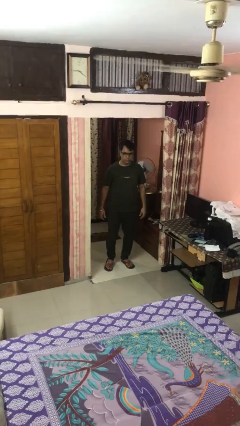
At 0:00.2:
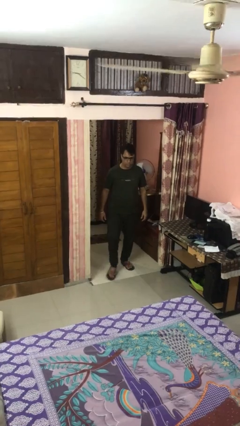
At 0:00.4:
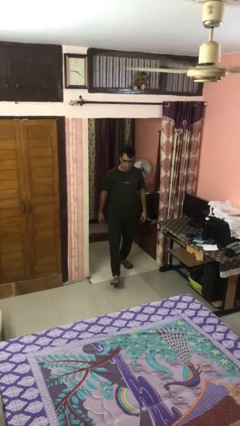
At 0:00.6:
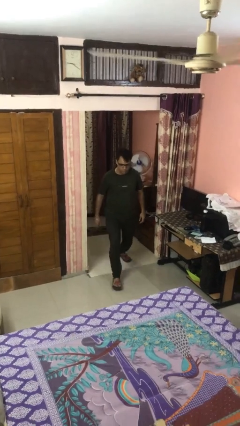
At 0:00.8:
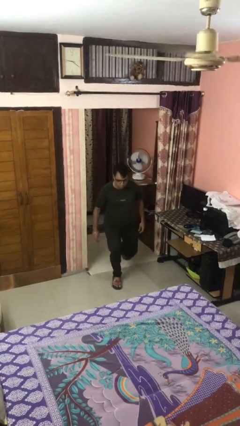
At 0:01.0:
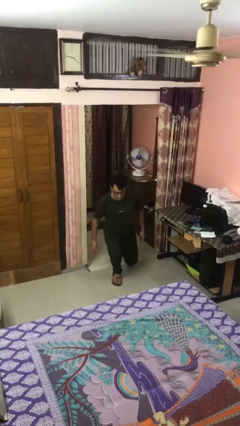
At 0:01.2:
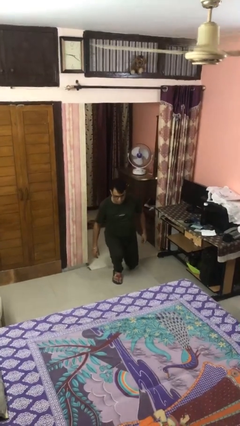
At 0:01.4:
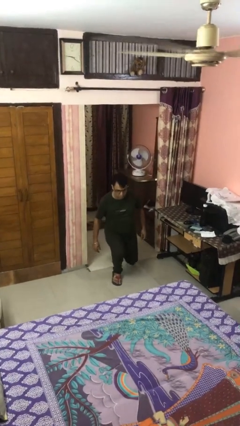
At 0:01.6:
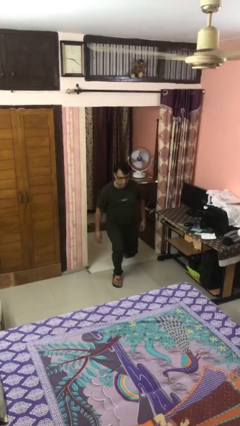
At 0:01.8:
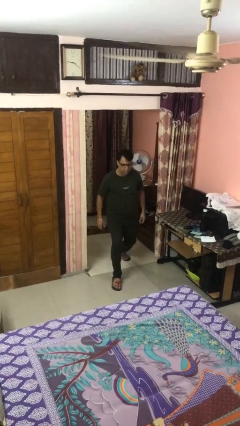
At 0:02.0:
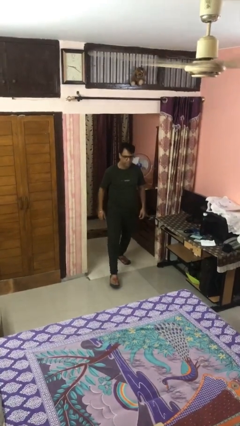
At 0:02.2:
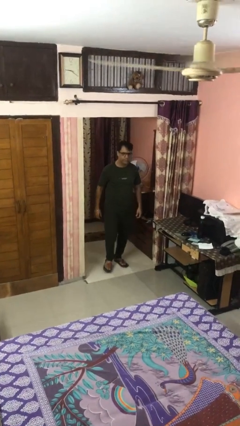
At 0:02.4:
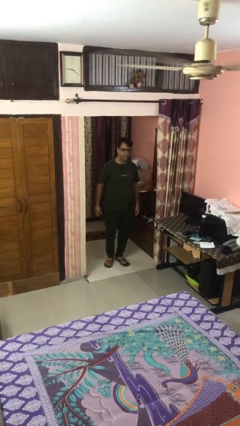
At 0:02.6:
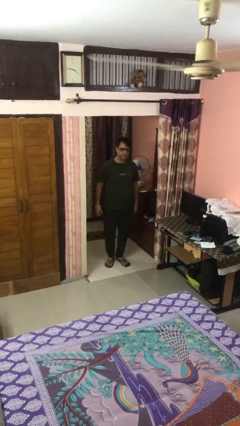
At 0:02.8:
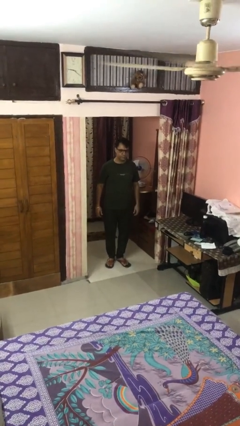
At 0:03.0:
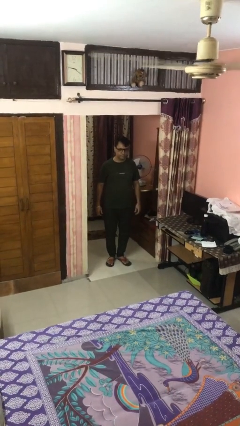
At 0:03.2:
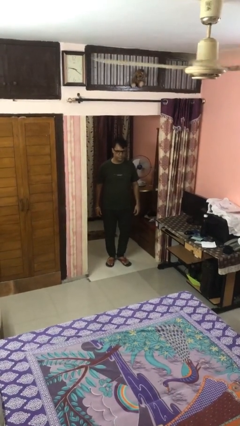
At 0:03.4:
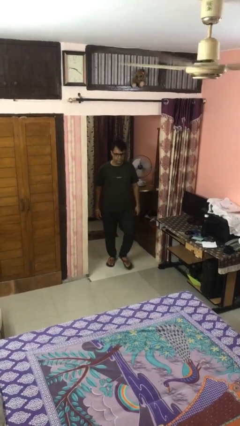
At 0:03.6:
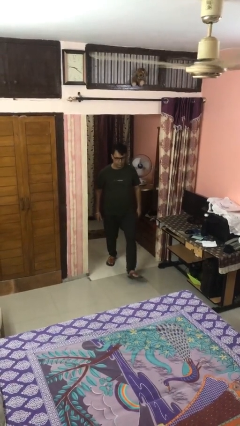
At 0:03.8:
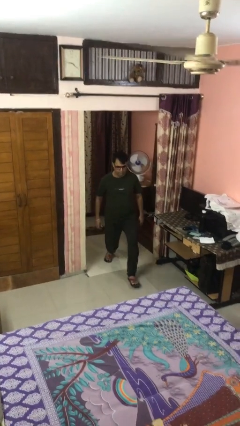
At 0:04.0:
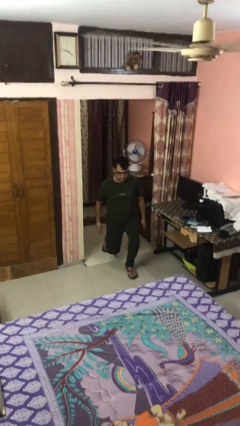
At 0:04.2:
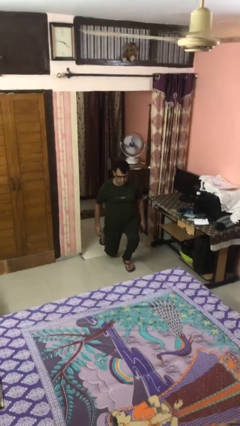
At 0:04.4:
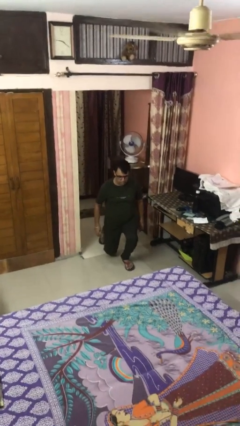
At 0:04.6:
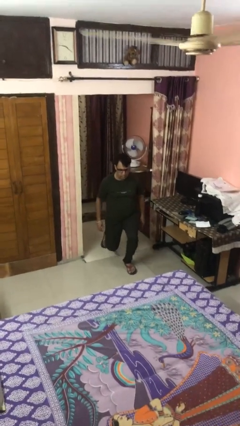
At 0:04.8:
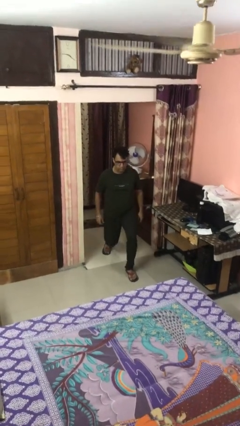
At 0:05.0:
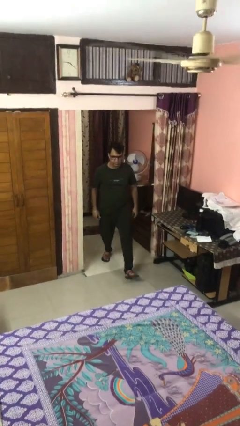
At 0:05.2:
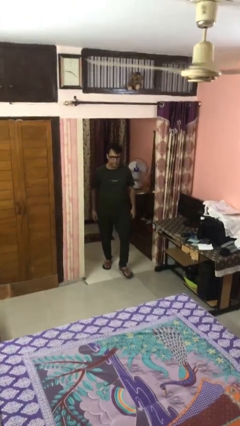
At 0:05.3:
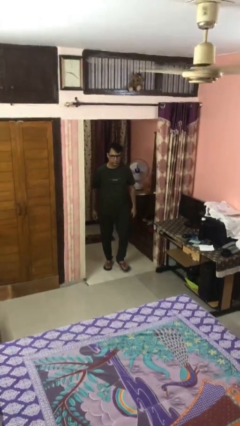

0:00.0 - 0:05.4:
person exercises with lunges

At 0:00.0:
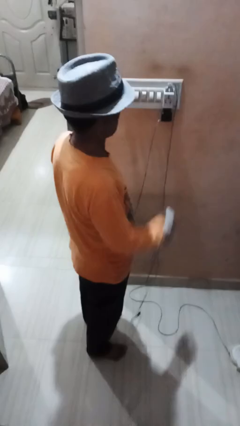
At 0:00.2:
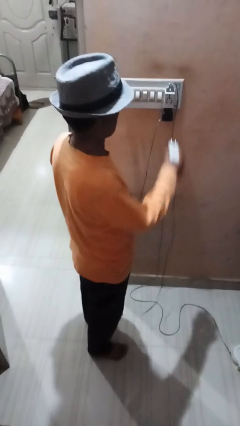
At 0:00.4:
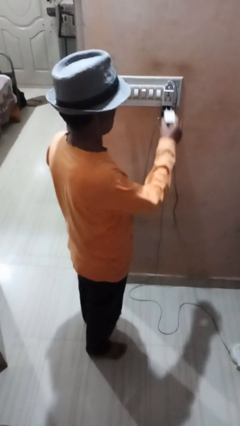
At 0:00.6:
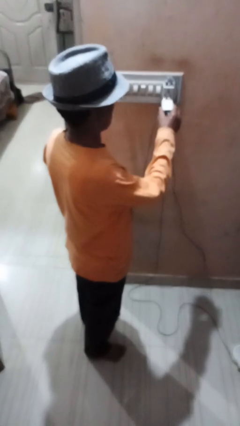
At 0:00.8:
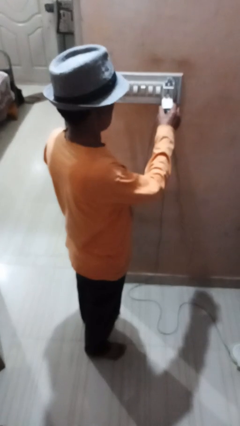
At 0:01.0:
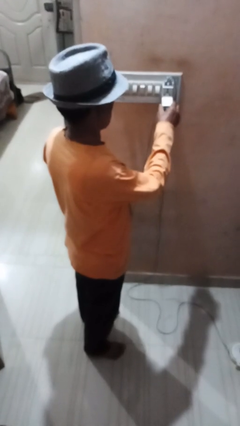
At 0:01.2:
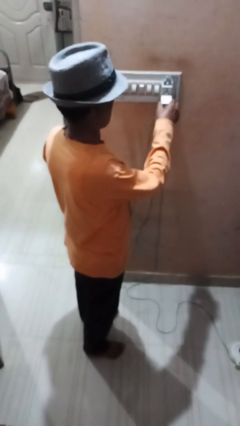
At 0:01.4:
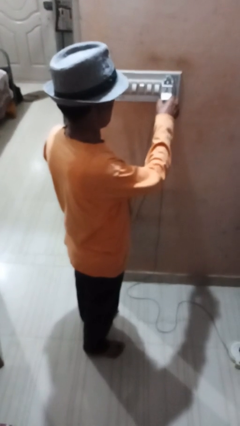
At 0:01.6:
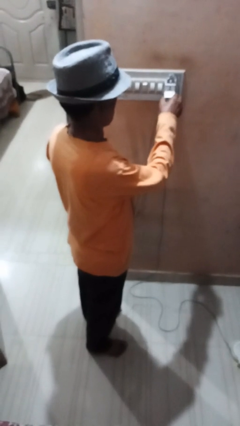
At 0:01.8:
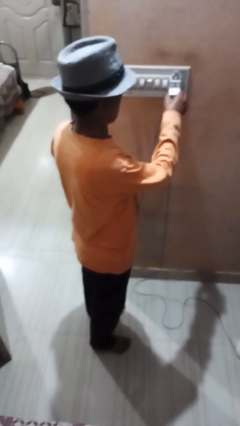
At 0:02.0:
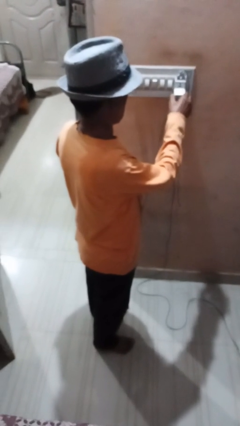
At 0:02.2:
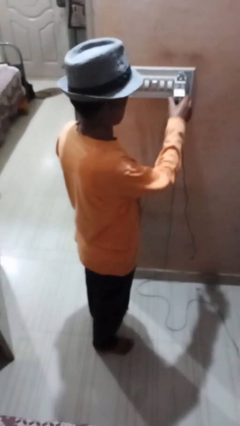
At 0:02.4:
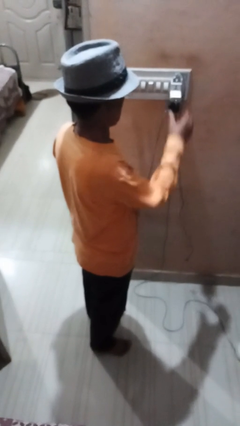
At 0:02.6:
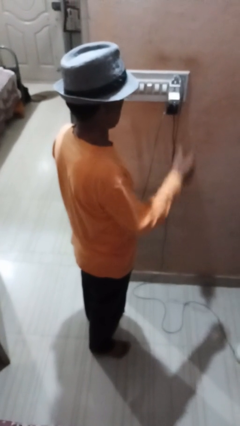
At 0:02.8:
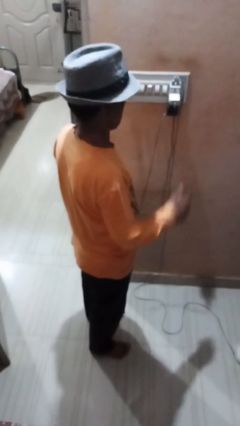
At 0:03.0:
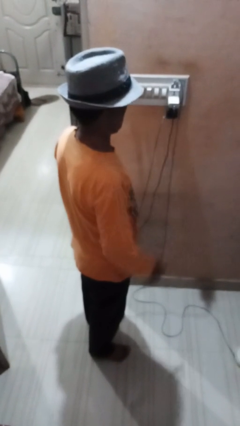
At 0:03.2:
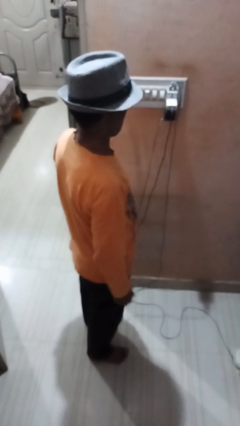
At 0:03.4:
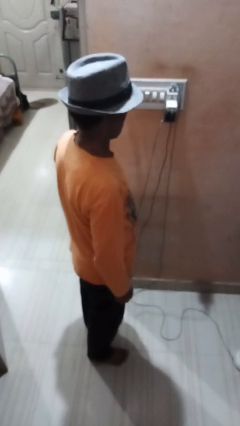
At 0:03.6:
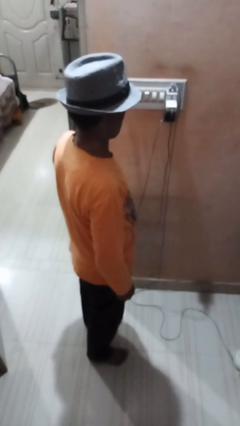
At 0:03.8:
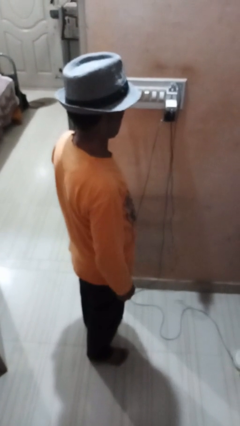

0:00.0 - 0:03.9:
person plugs into electrical socket

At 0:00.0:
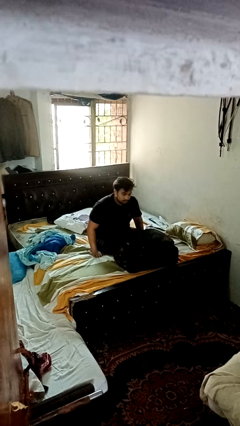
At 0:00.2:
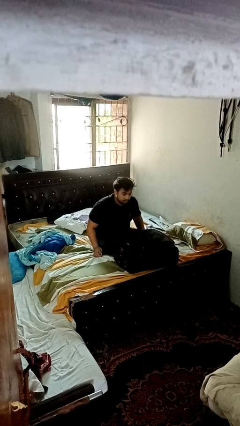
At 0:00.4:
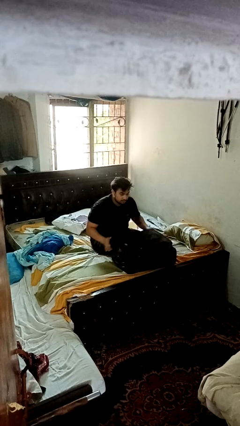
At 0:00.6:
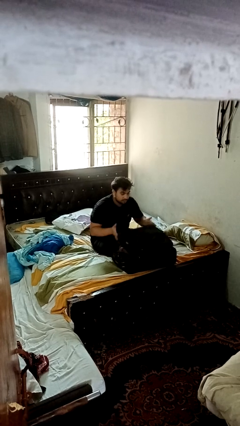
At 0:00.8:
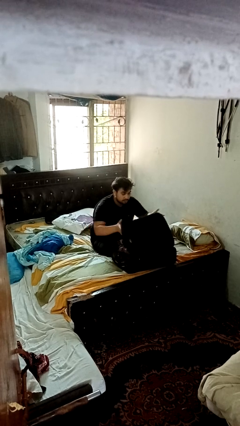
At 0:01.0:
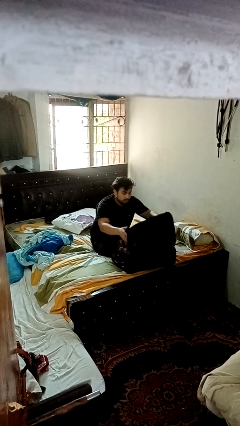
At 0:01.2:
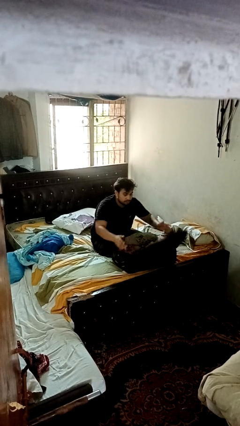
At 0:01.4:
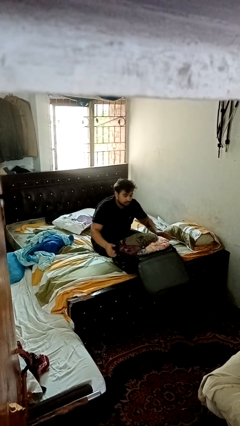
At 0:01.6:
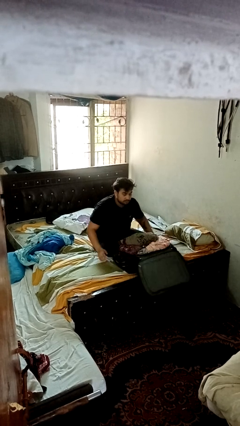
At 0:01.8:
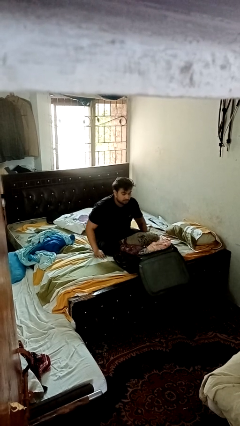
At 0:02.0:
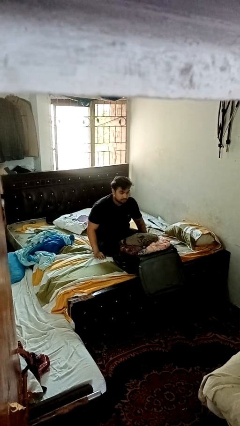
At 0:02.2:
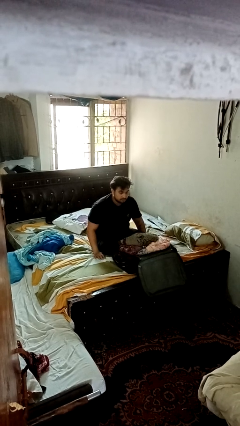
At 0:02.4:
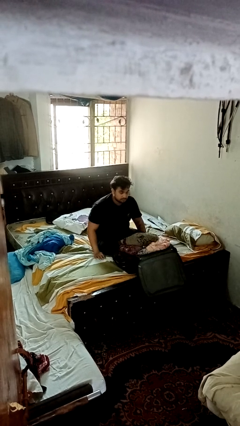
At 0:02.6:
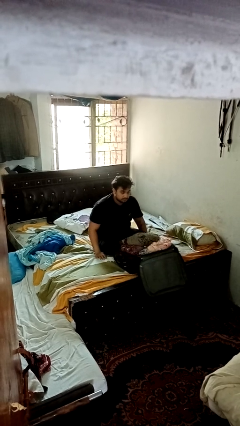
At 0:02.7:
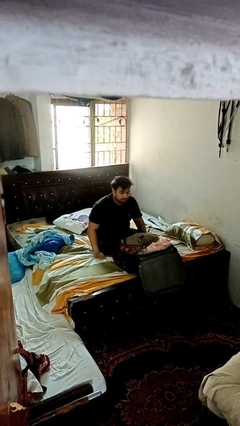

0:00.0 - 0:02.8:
person opens suitcase

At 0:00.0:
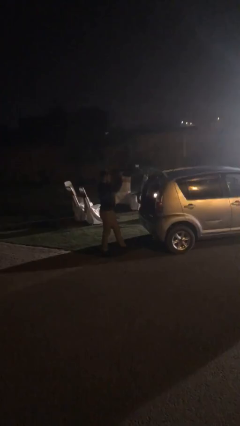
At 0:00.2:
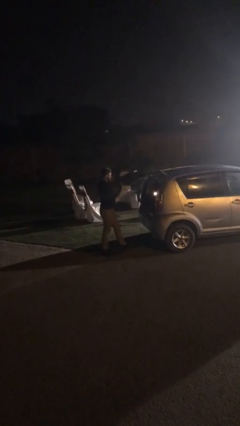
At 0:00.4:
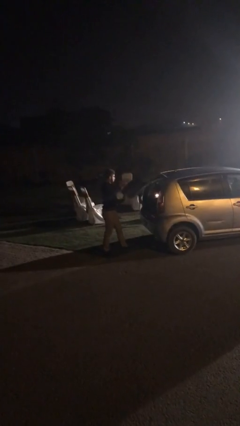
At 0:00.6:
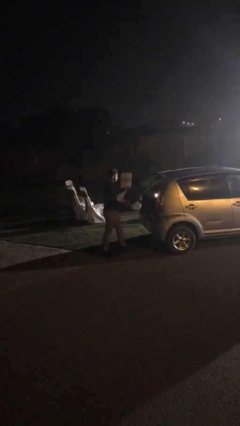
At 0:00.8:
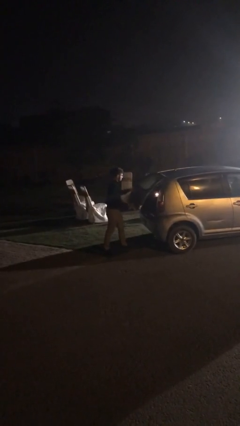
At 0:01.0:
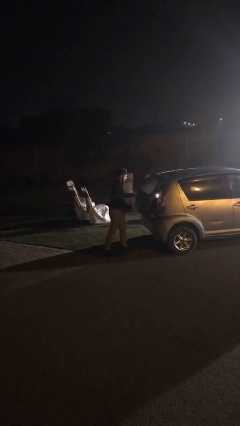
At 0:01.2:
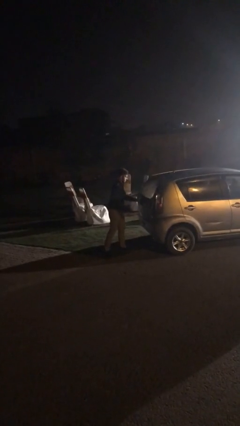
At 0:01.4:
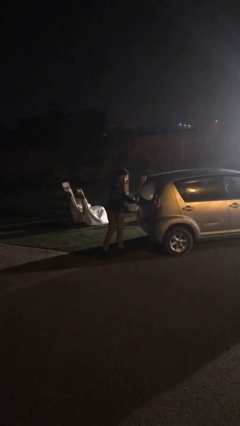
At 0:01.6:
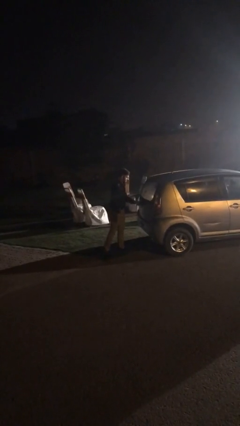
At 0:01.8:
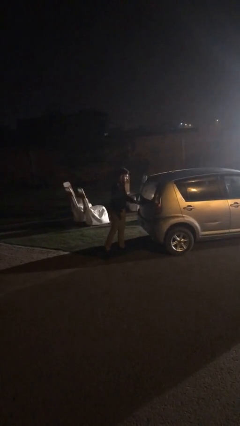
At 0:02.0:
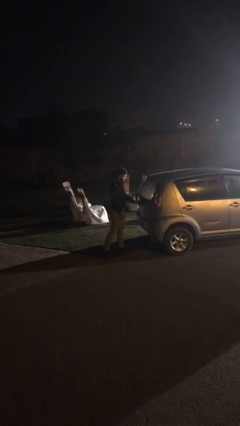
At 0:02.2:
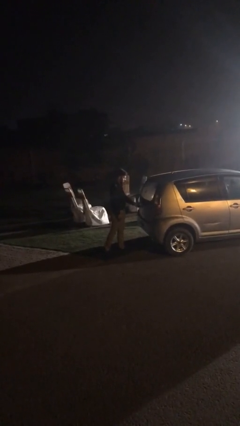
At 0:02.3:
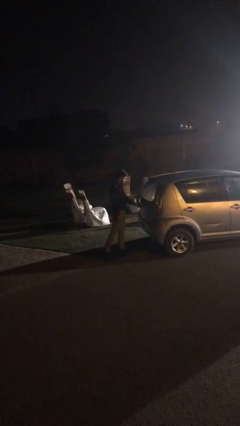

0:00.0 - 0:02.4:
person closes car trunk
